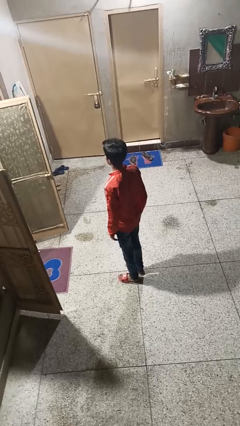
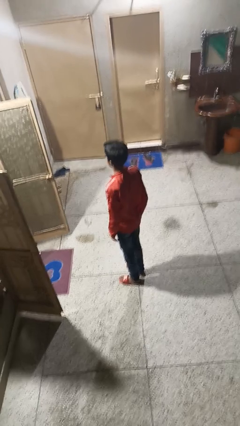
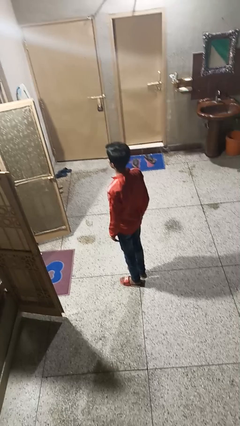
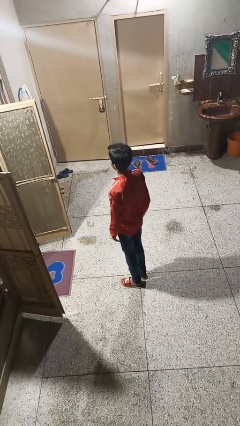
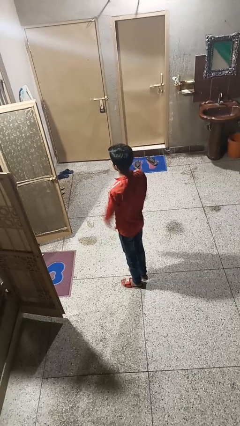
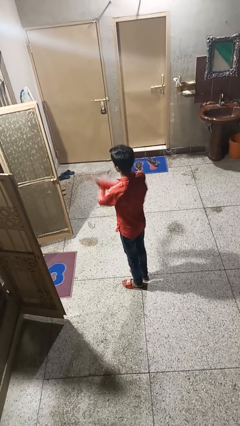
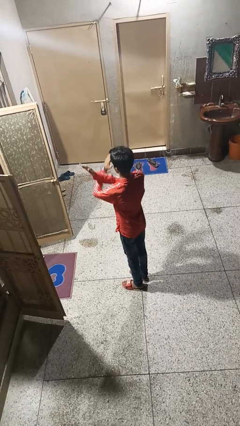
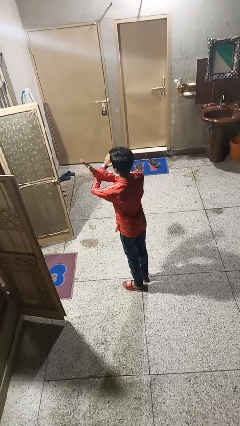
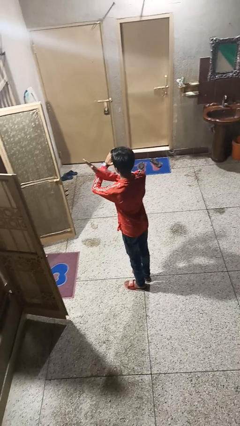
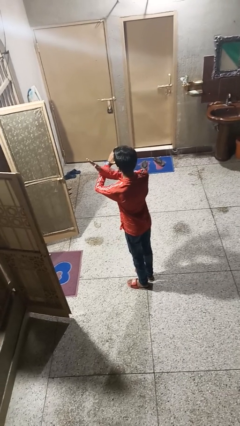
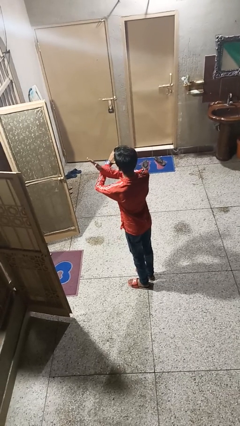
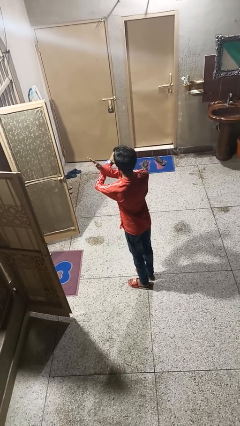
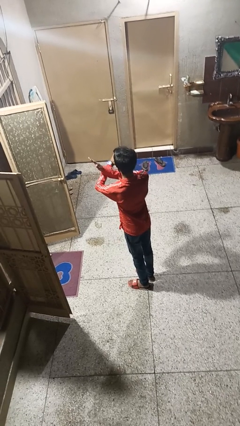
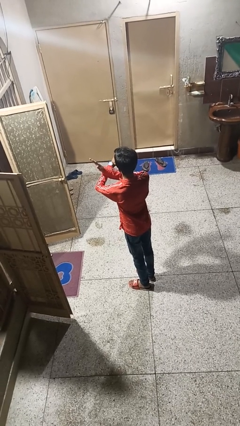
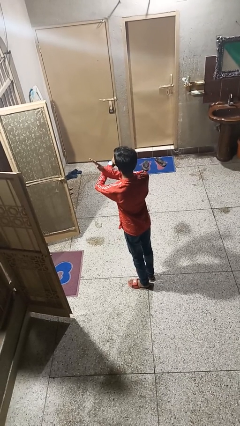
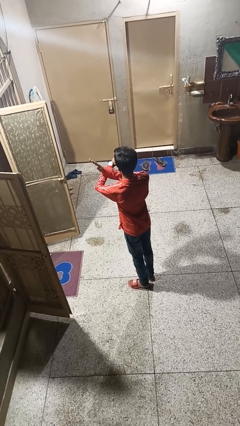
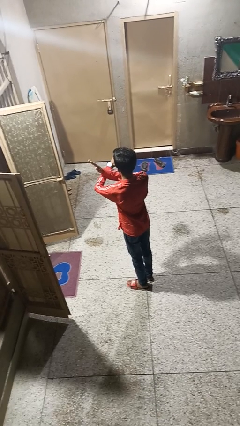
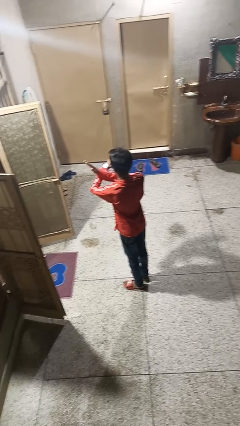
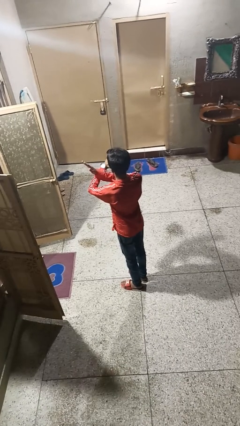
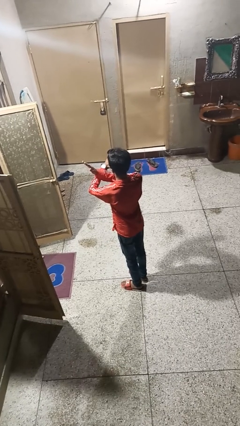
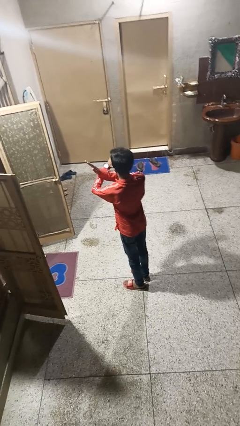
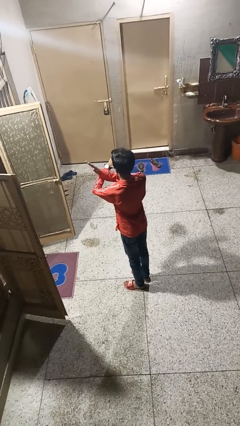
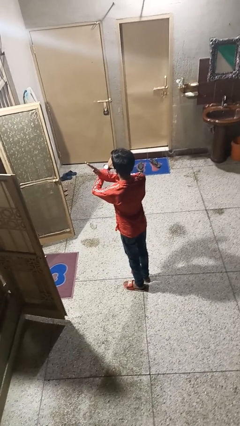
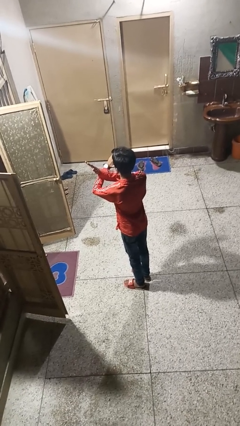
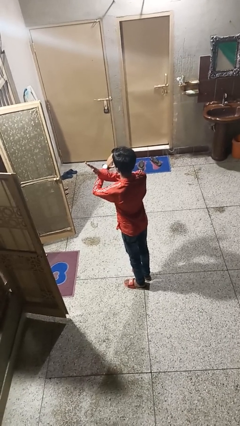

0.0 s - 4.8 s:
person gestures arms x

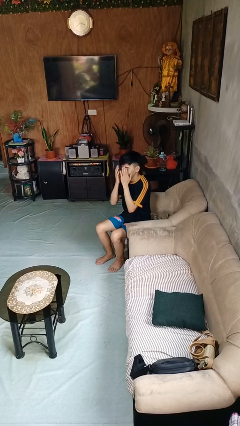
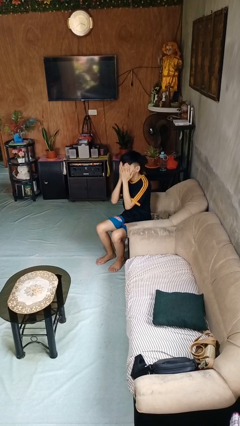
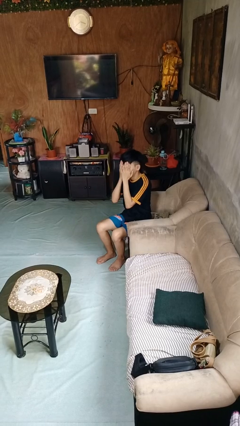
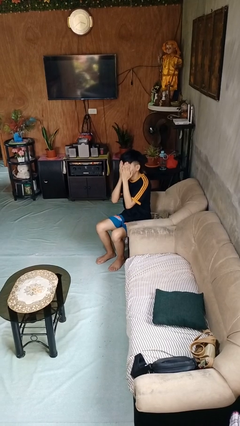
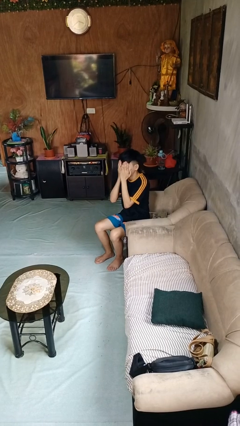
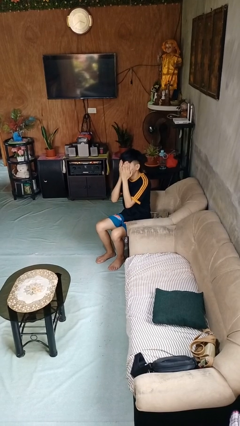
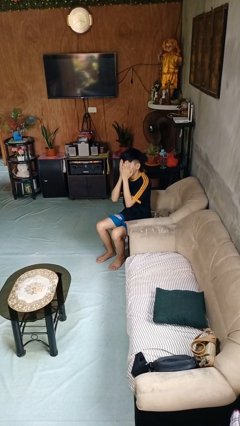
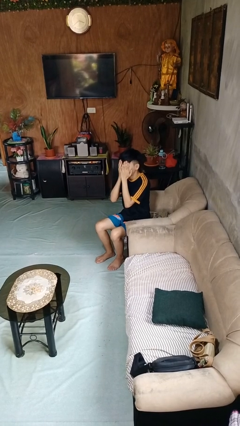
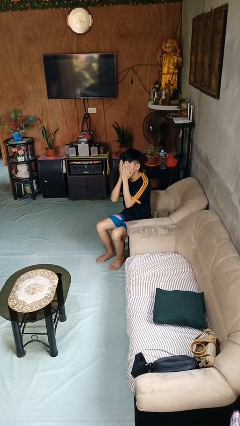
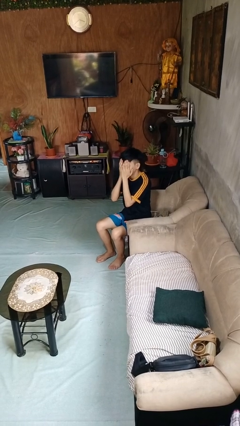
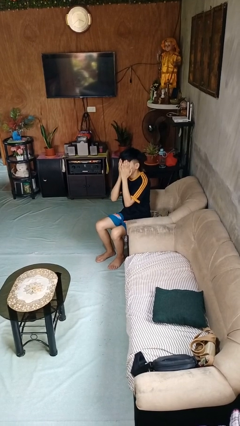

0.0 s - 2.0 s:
person covers face with hands

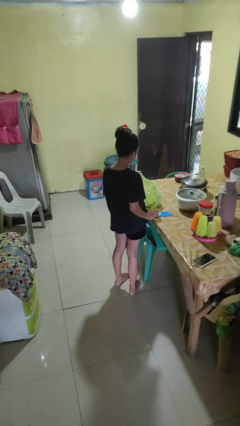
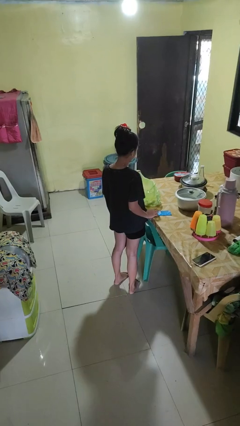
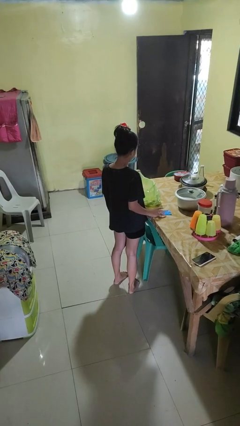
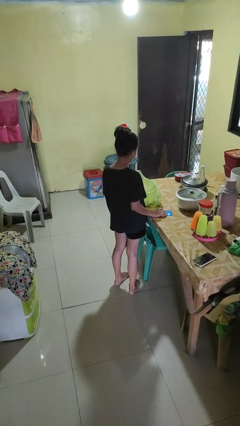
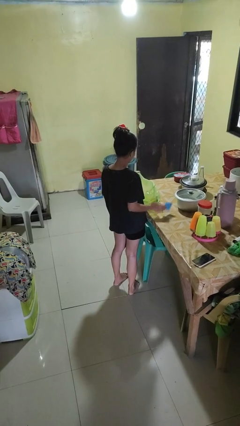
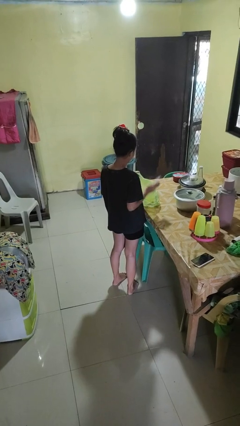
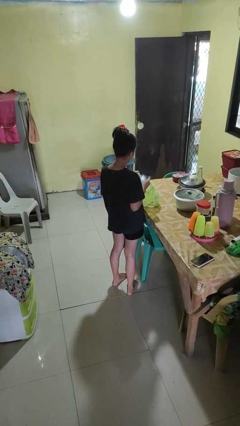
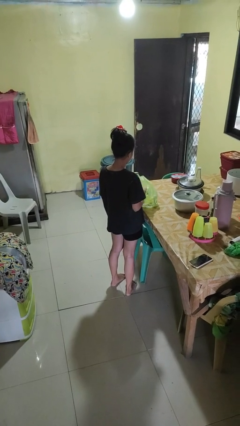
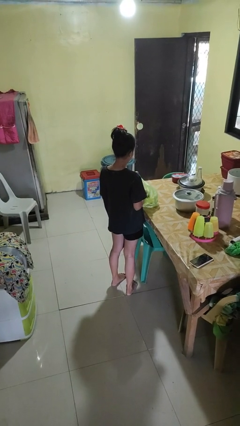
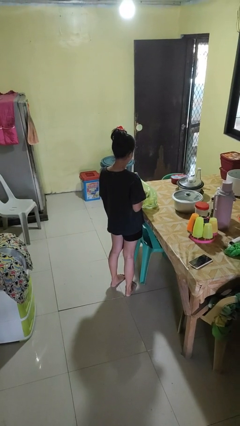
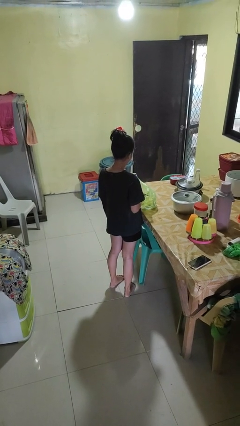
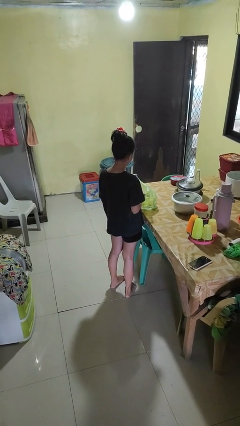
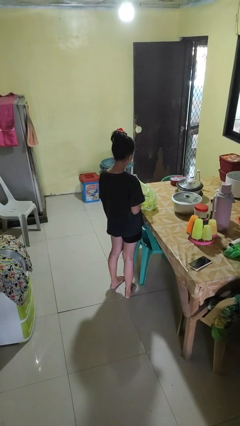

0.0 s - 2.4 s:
person puts object into bag

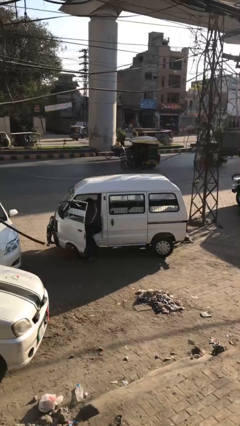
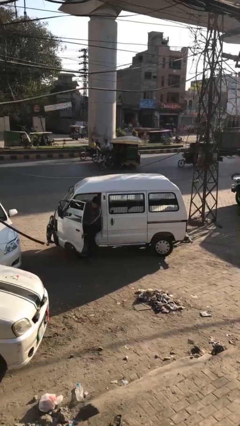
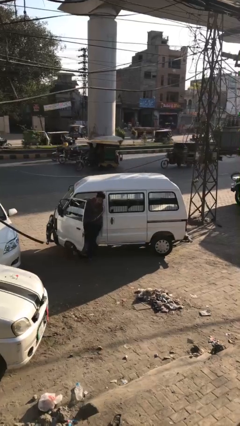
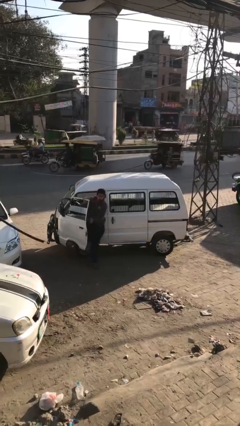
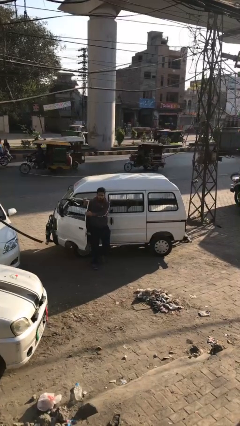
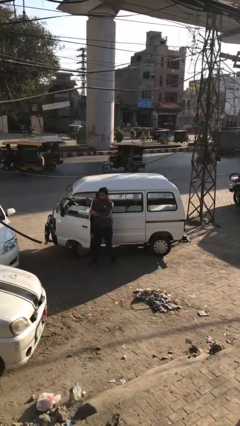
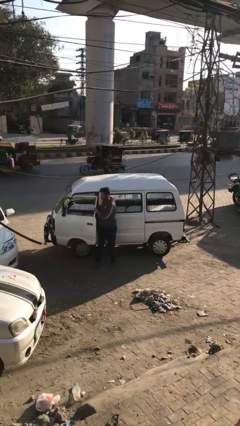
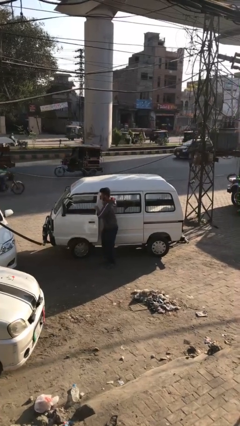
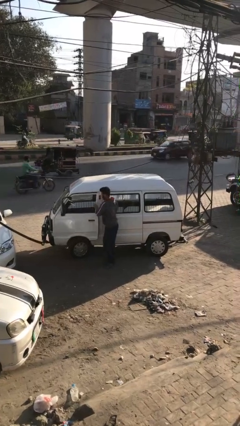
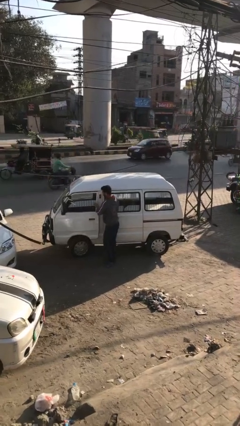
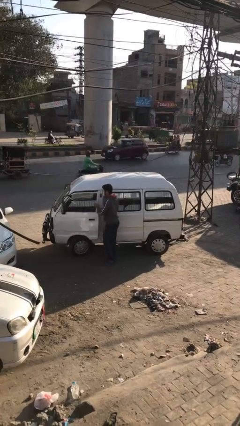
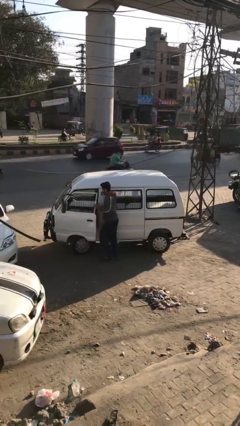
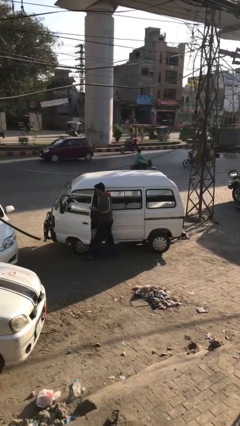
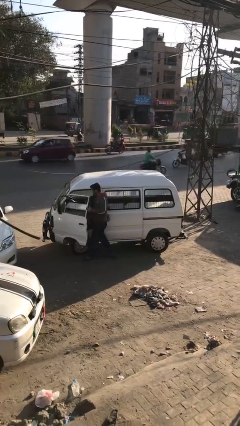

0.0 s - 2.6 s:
car drops off person

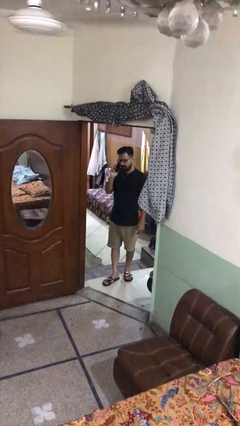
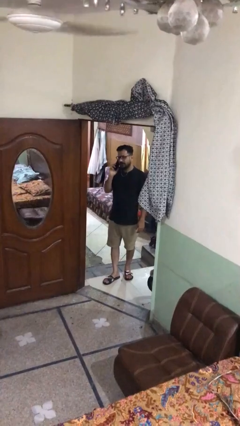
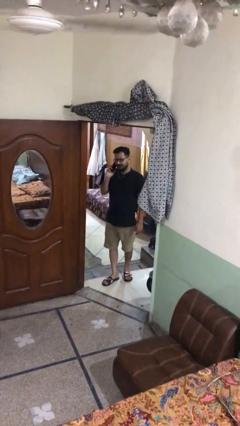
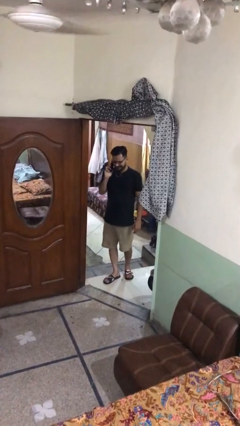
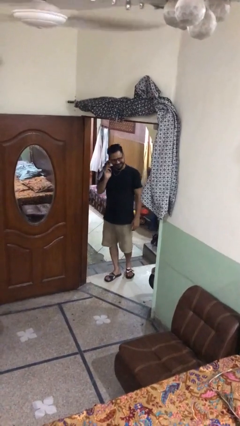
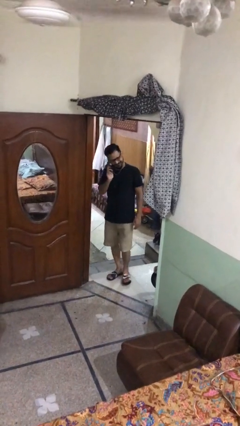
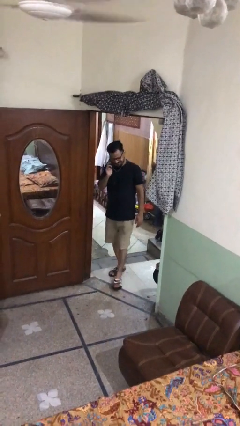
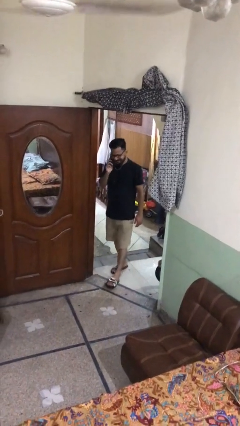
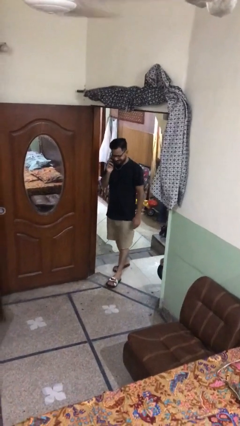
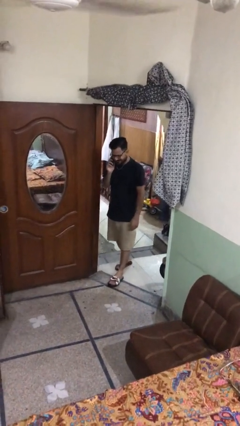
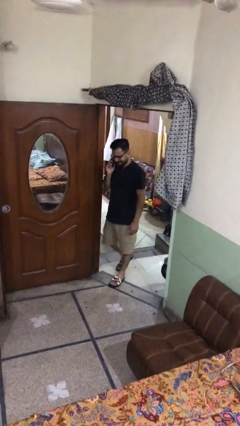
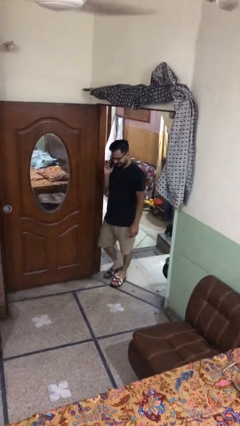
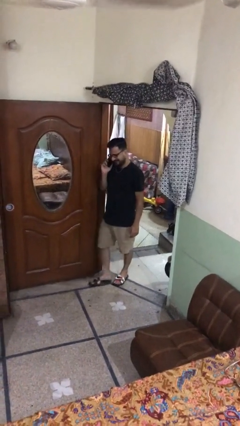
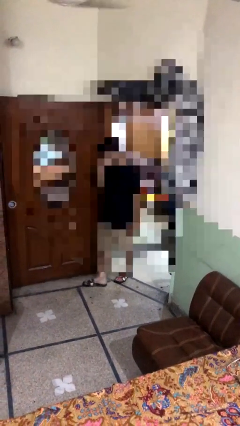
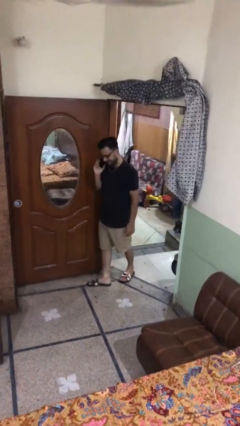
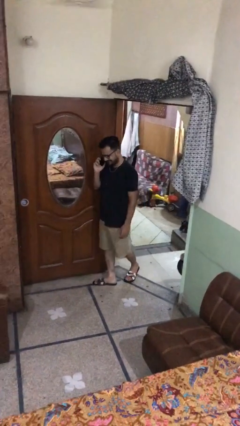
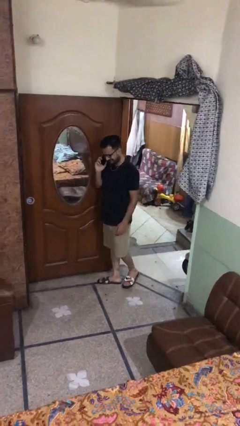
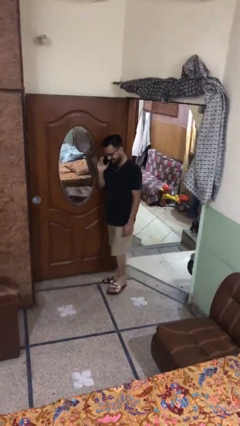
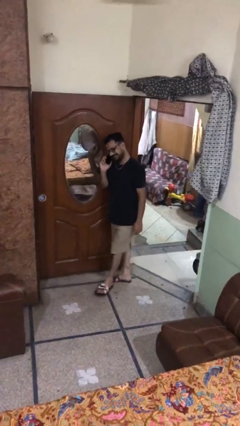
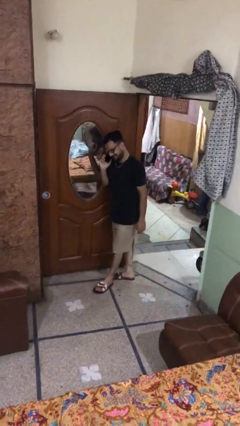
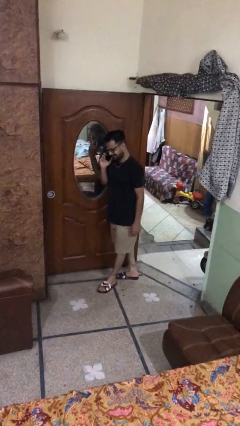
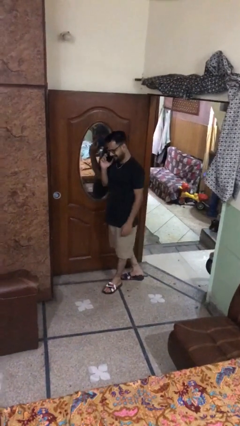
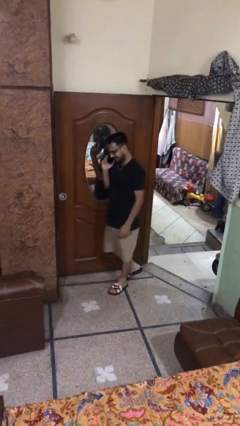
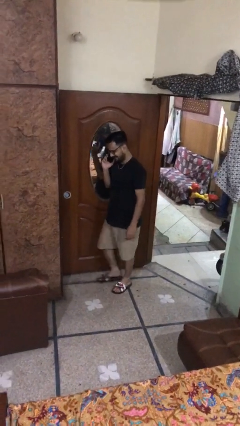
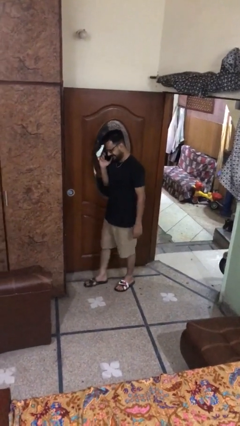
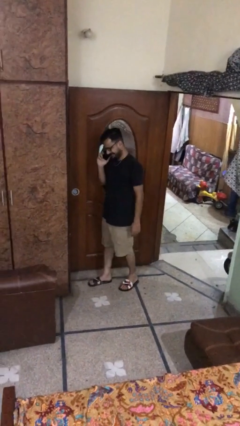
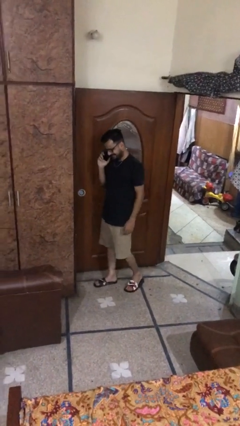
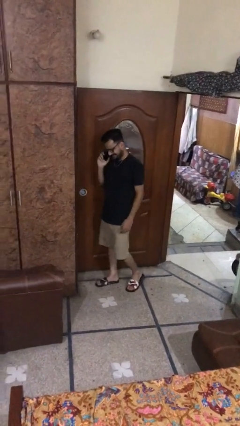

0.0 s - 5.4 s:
person enters scene through structure

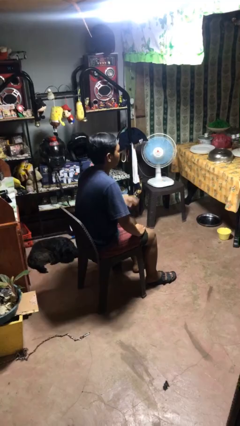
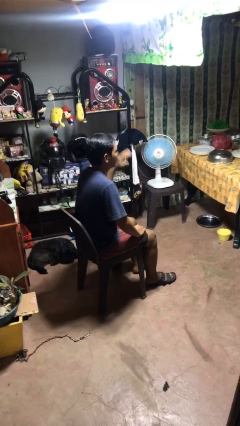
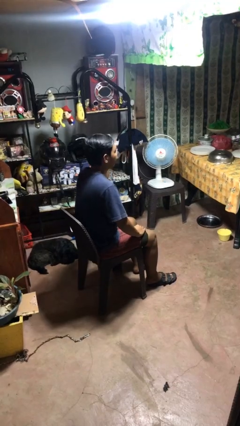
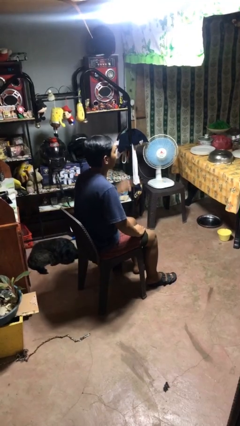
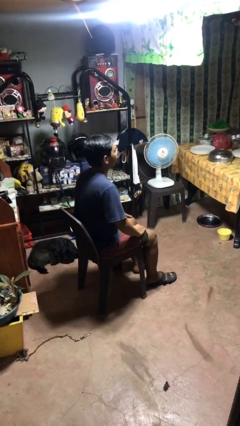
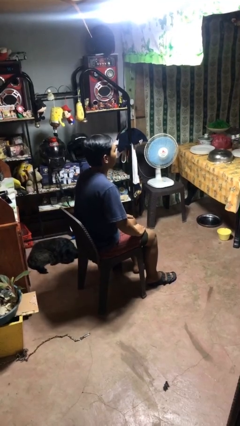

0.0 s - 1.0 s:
person slaps hands on thighs
